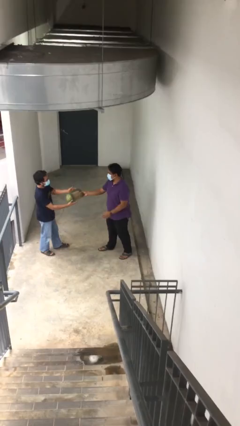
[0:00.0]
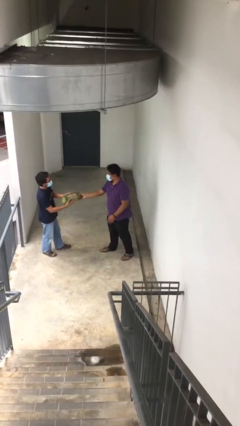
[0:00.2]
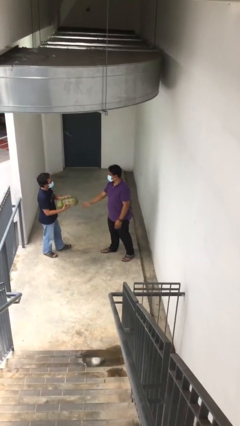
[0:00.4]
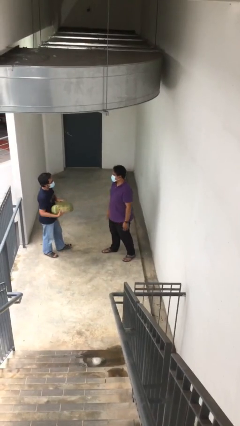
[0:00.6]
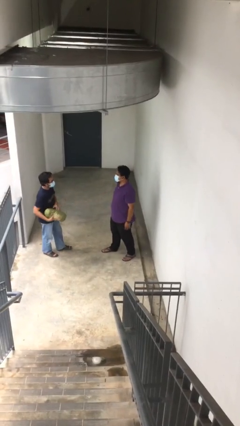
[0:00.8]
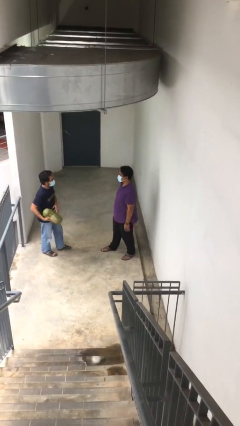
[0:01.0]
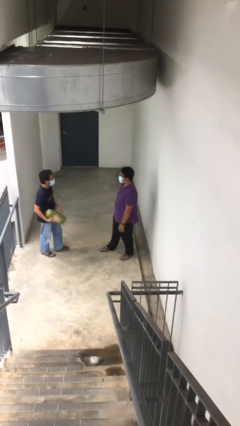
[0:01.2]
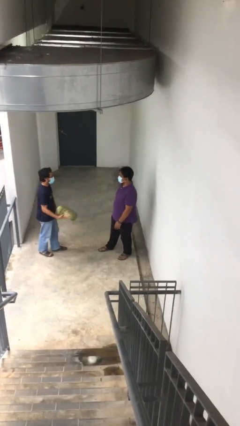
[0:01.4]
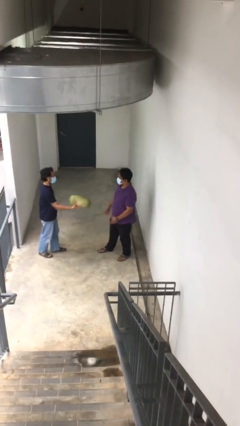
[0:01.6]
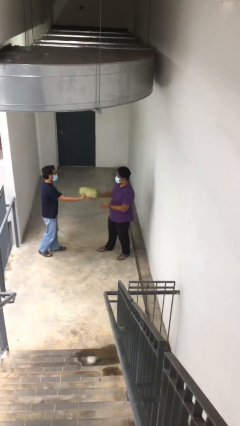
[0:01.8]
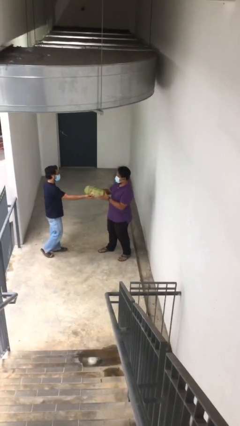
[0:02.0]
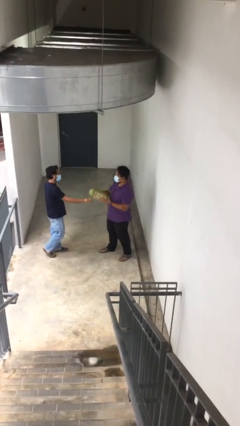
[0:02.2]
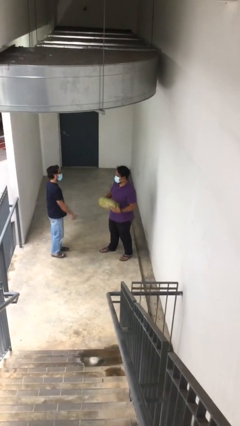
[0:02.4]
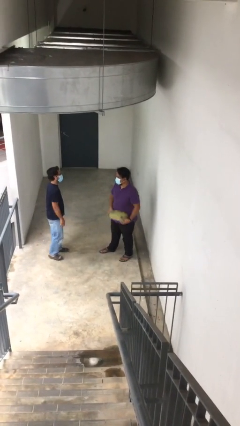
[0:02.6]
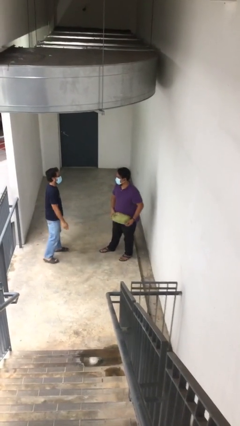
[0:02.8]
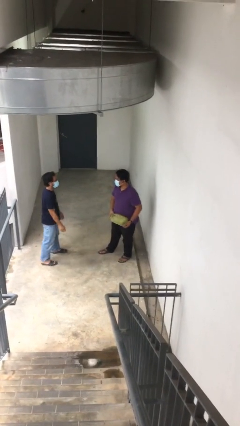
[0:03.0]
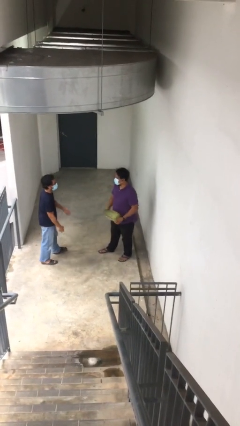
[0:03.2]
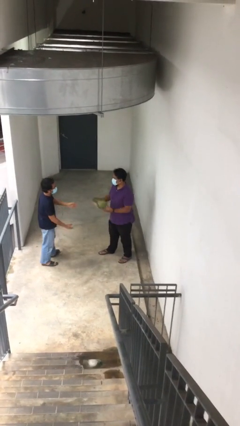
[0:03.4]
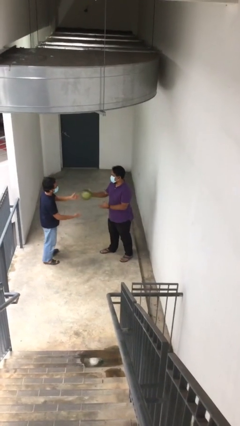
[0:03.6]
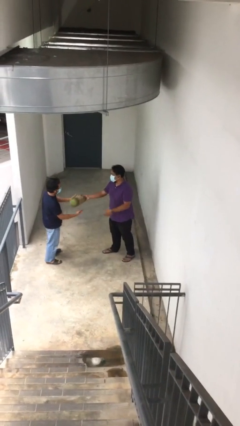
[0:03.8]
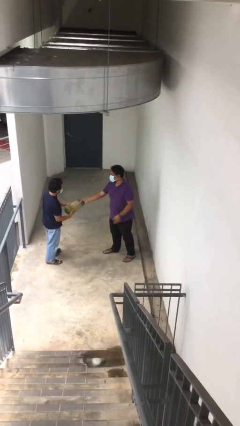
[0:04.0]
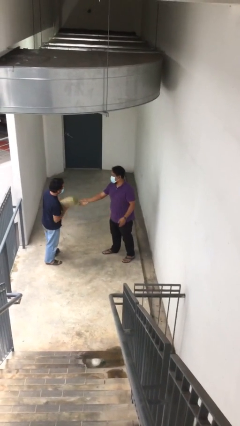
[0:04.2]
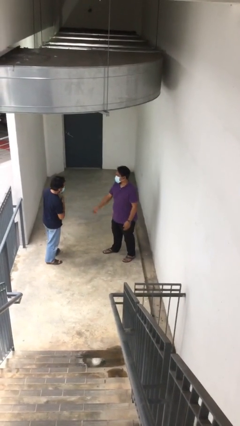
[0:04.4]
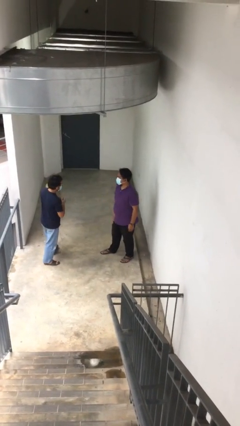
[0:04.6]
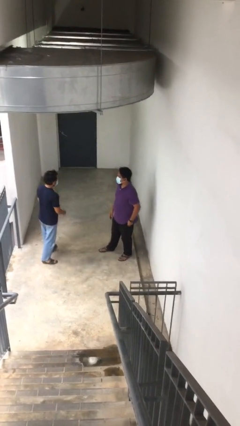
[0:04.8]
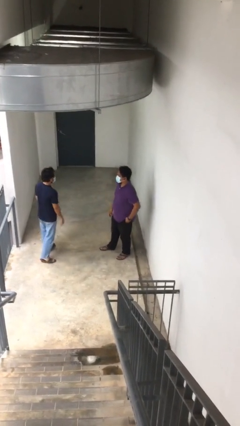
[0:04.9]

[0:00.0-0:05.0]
person transfers object to person

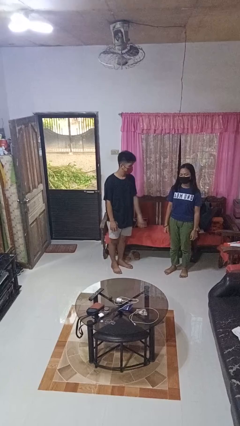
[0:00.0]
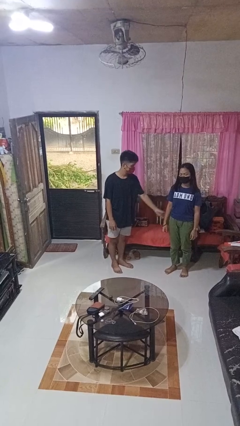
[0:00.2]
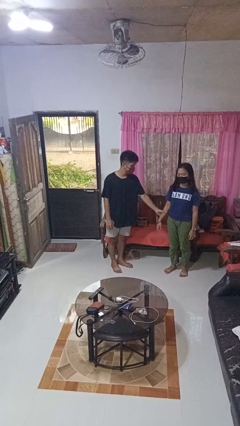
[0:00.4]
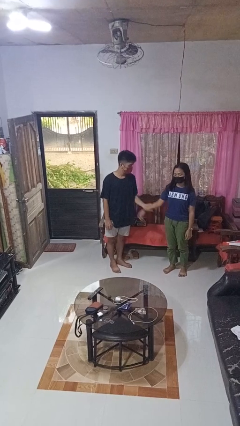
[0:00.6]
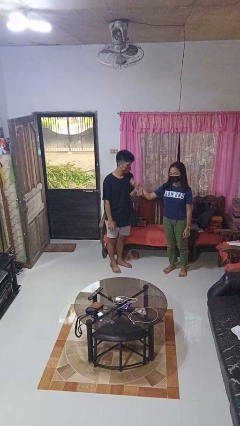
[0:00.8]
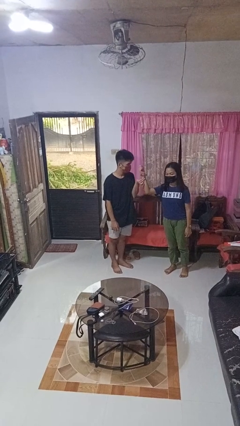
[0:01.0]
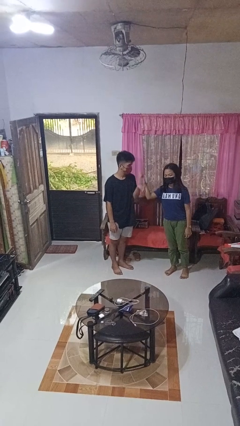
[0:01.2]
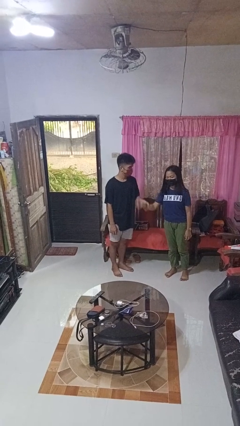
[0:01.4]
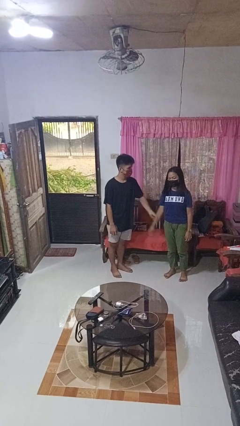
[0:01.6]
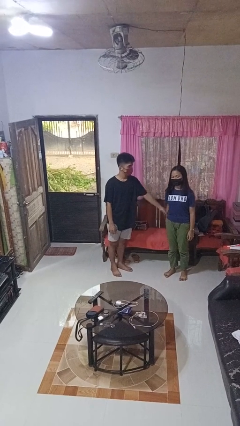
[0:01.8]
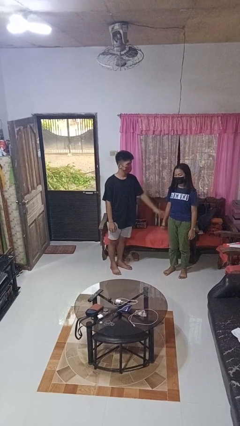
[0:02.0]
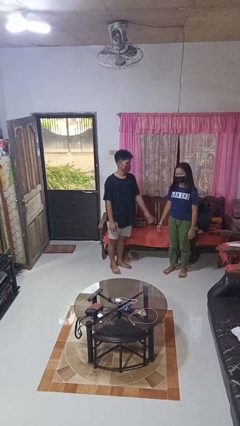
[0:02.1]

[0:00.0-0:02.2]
person grabs person by forearm

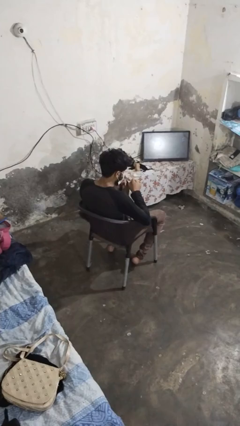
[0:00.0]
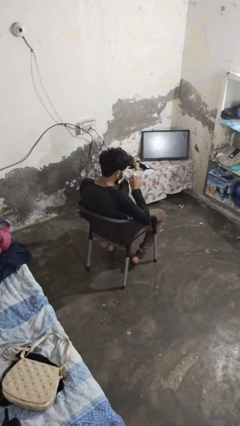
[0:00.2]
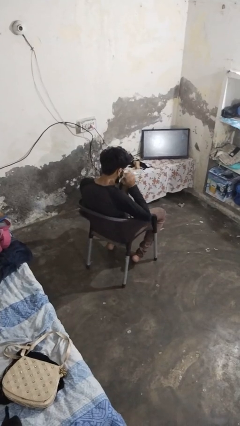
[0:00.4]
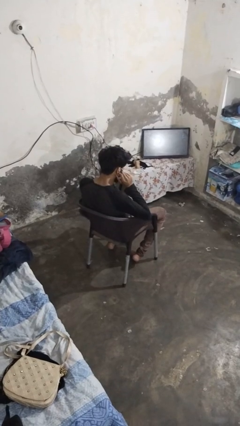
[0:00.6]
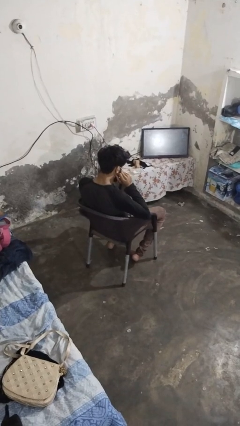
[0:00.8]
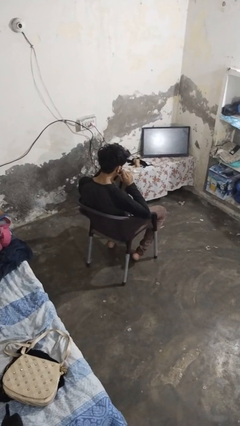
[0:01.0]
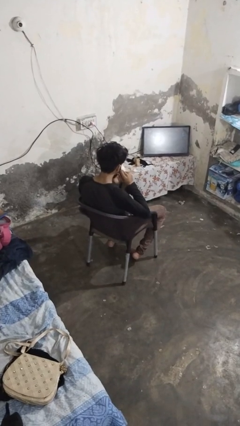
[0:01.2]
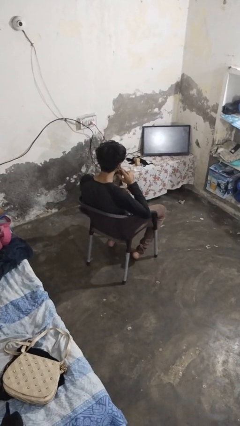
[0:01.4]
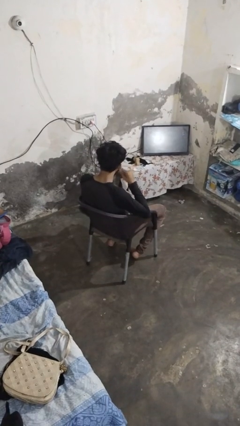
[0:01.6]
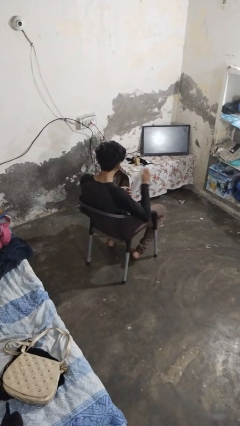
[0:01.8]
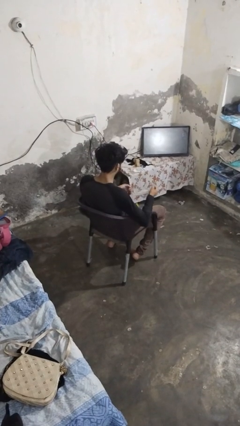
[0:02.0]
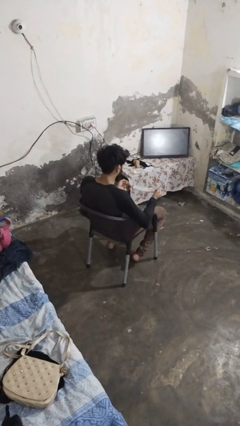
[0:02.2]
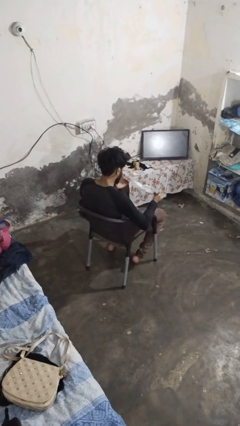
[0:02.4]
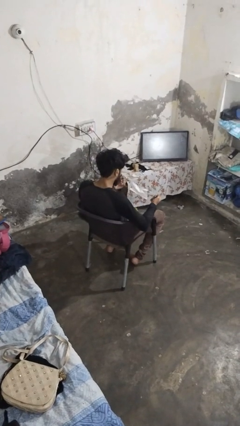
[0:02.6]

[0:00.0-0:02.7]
person takes off facemask

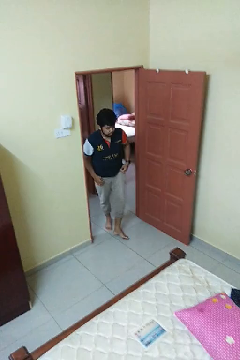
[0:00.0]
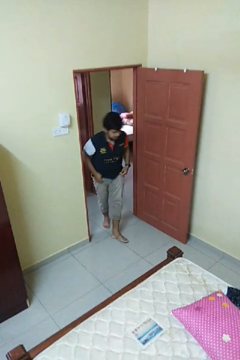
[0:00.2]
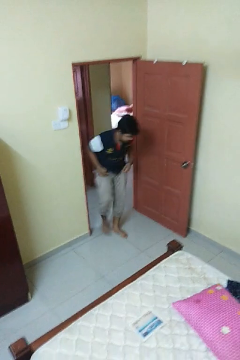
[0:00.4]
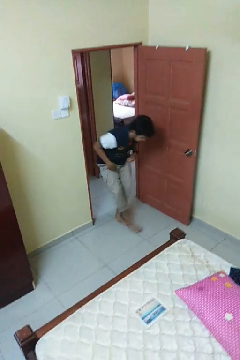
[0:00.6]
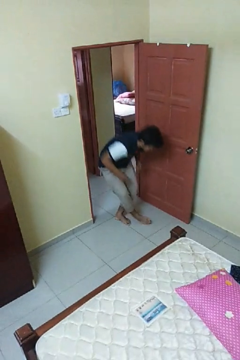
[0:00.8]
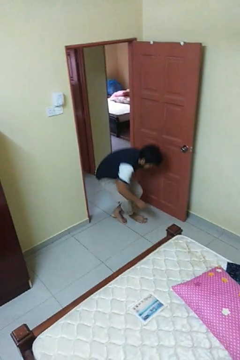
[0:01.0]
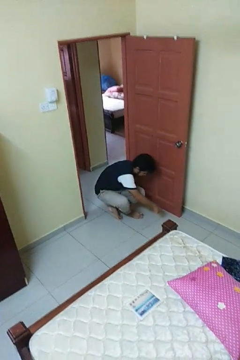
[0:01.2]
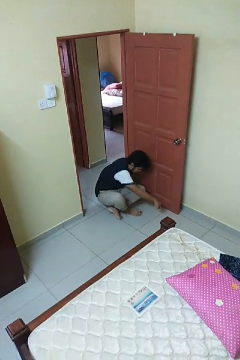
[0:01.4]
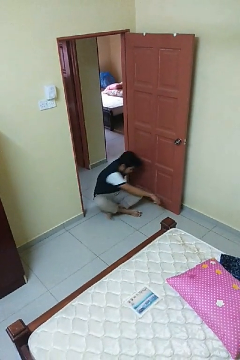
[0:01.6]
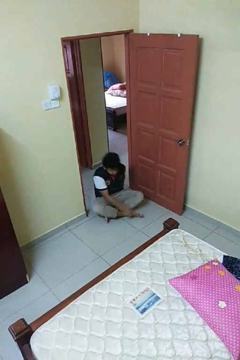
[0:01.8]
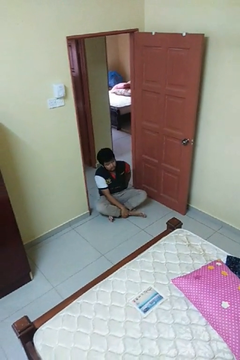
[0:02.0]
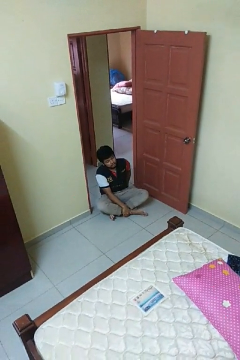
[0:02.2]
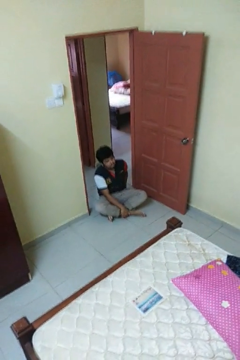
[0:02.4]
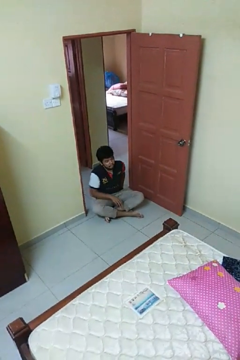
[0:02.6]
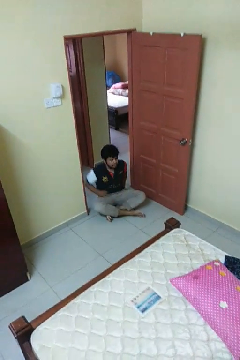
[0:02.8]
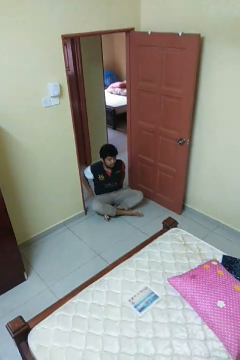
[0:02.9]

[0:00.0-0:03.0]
person sits crisscross

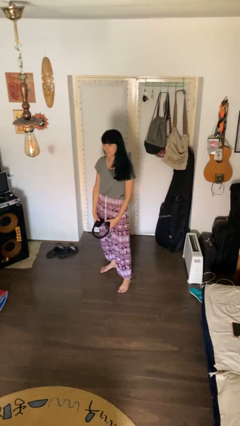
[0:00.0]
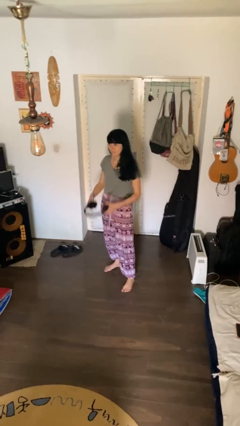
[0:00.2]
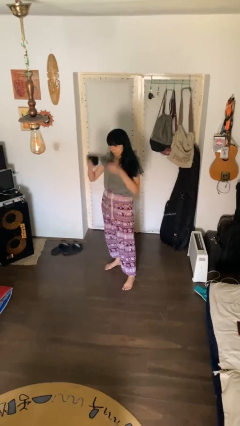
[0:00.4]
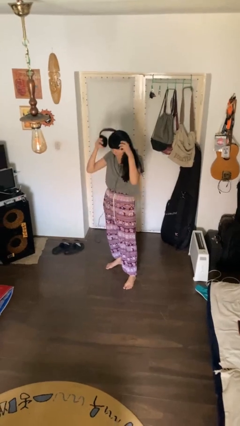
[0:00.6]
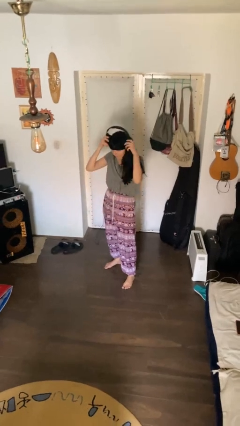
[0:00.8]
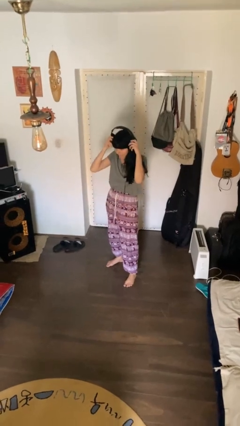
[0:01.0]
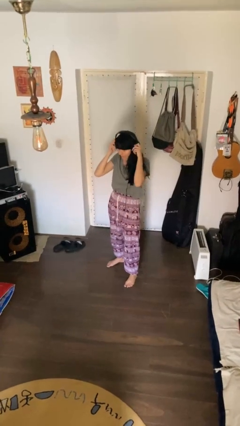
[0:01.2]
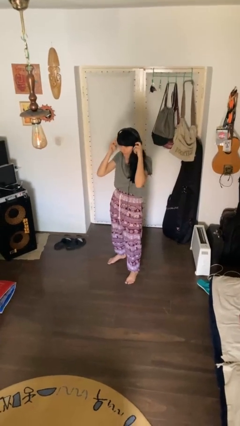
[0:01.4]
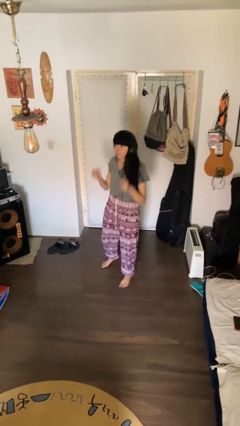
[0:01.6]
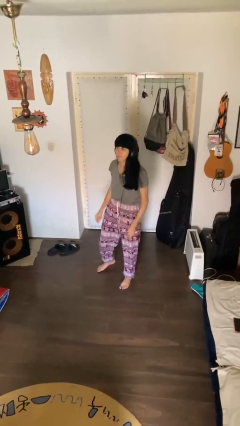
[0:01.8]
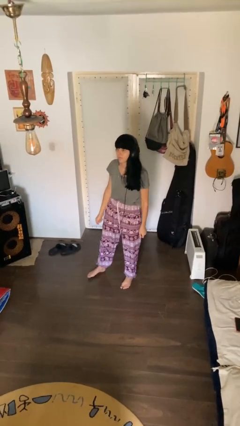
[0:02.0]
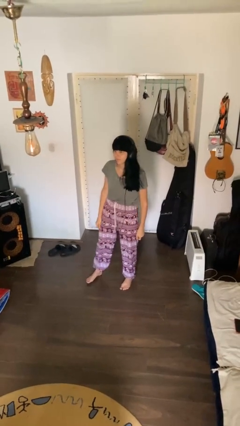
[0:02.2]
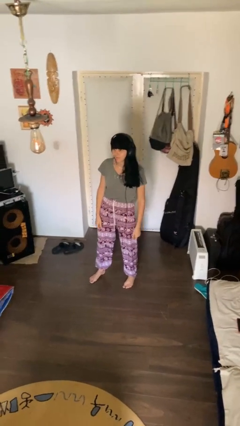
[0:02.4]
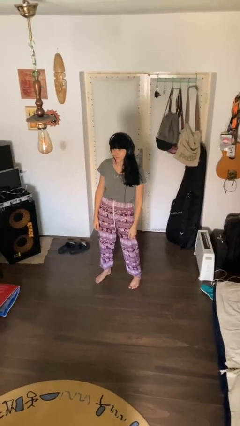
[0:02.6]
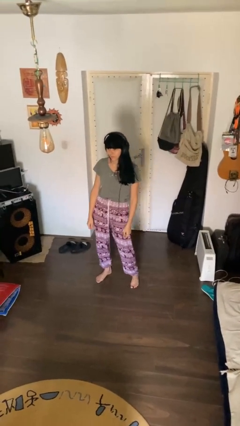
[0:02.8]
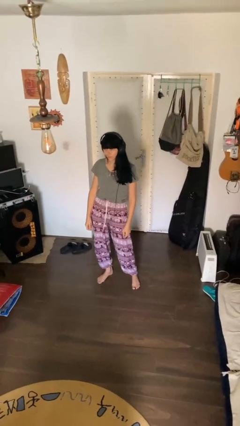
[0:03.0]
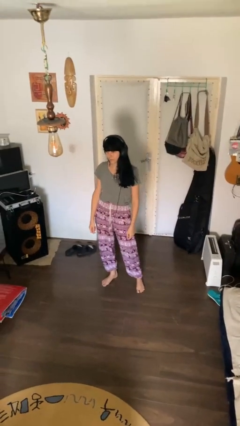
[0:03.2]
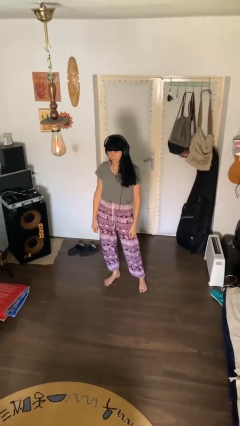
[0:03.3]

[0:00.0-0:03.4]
person puts on headphones

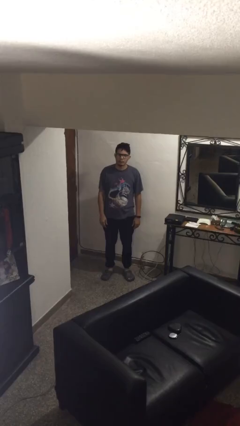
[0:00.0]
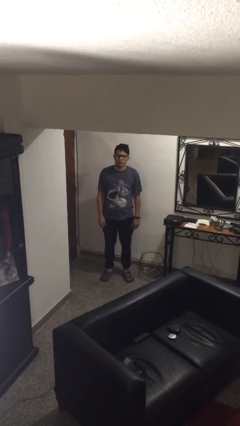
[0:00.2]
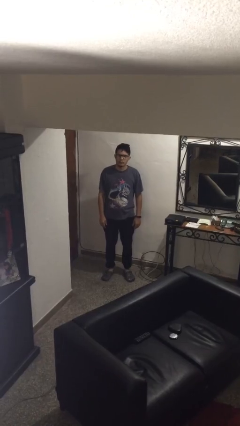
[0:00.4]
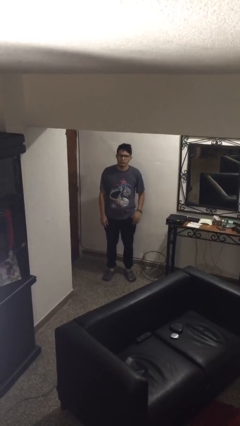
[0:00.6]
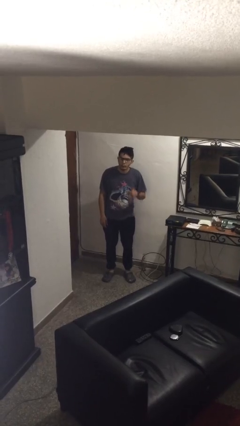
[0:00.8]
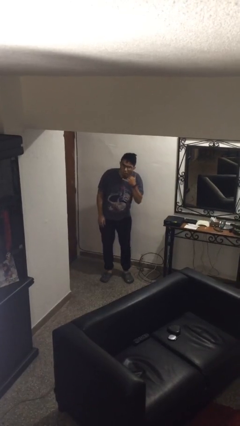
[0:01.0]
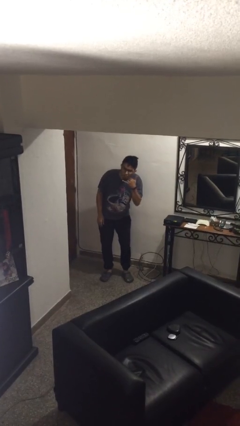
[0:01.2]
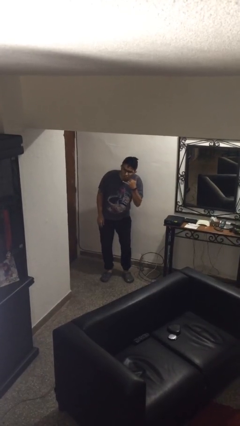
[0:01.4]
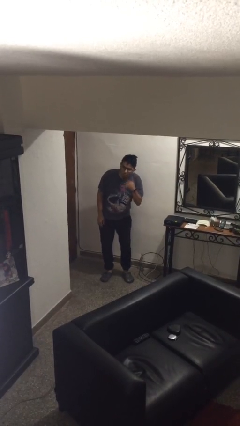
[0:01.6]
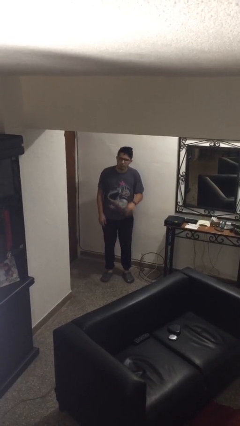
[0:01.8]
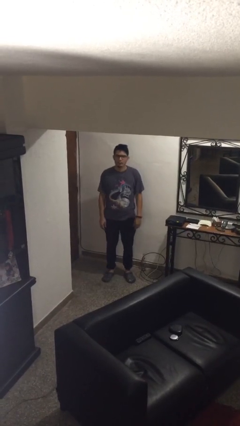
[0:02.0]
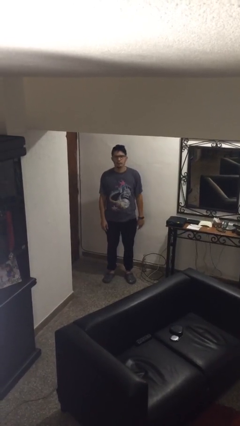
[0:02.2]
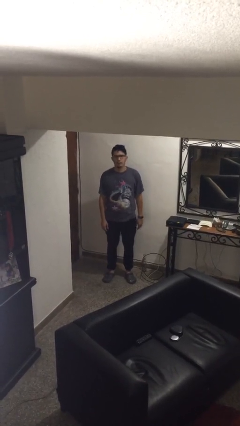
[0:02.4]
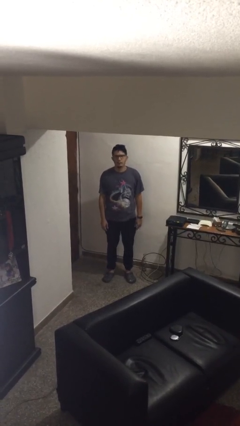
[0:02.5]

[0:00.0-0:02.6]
person gestures call me
